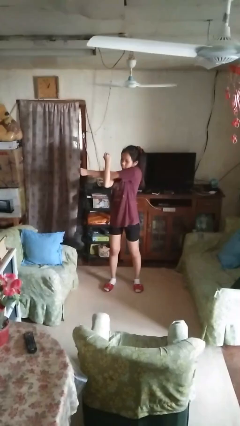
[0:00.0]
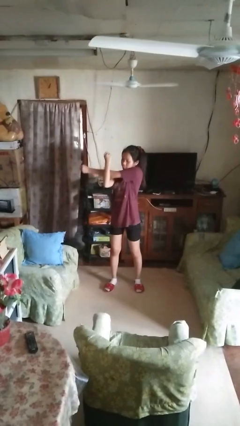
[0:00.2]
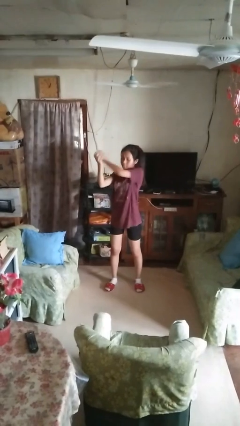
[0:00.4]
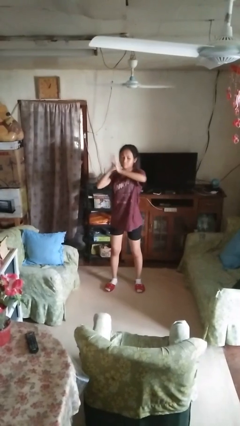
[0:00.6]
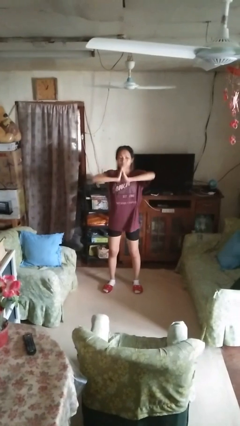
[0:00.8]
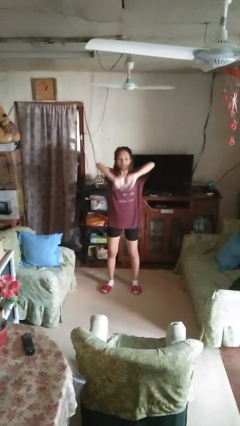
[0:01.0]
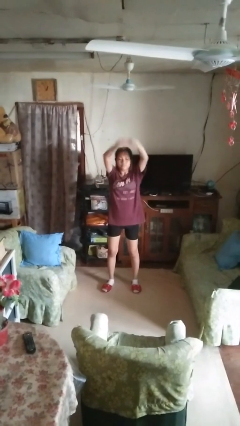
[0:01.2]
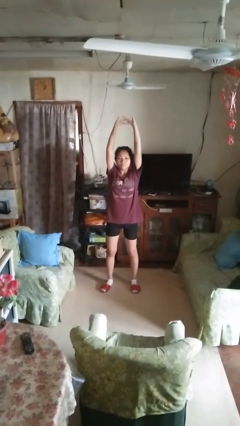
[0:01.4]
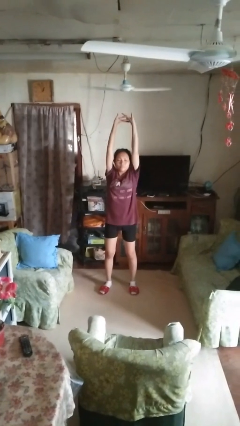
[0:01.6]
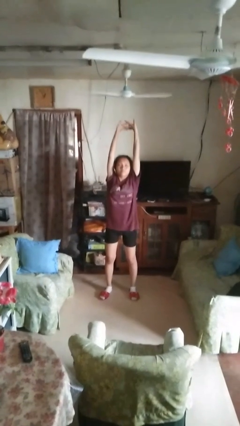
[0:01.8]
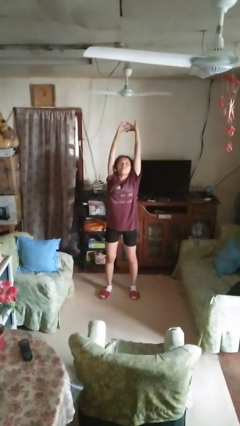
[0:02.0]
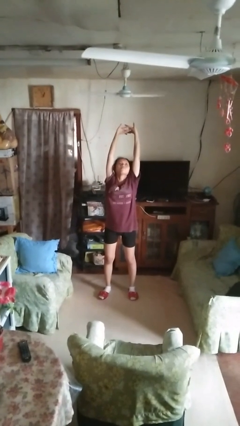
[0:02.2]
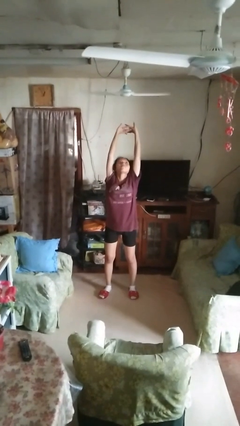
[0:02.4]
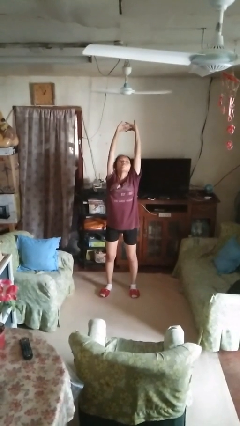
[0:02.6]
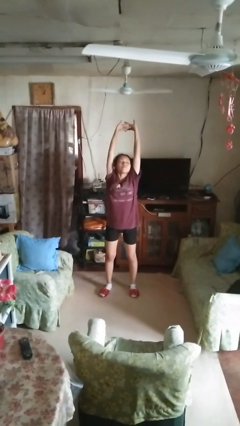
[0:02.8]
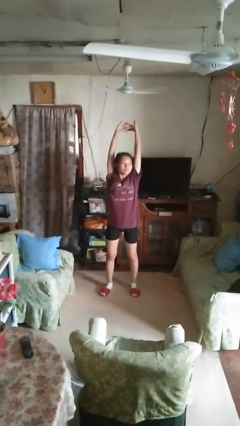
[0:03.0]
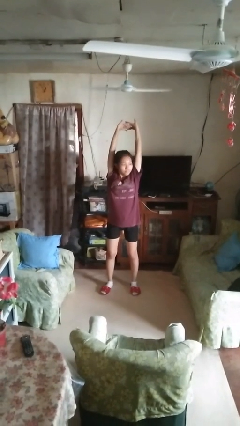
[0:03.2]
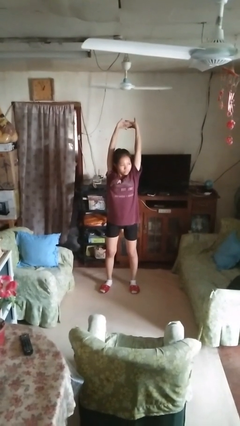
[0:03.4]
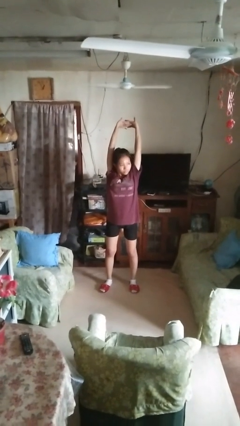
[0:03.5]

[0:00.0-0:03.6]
person stretches arms over head

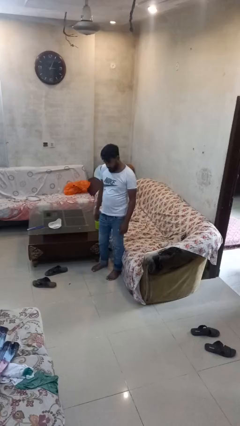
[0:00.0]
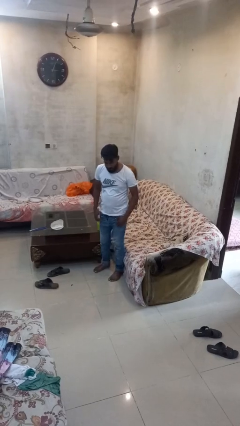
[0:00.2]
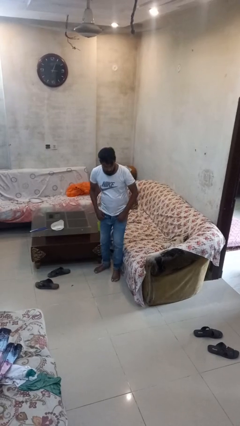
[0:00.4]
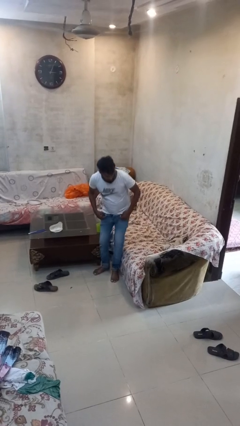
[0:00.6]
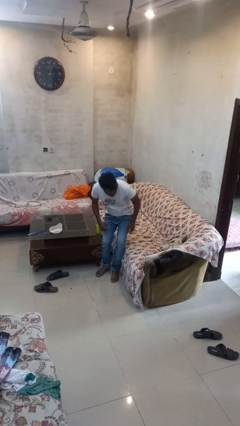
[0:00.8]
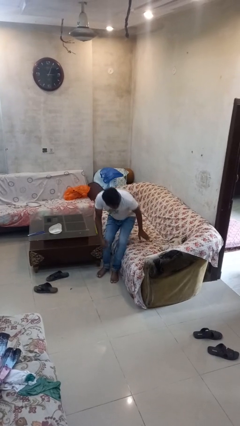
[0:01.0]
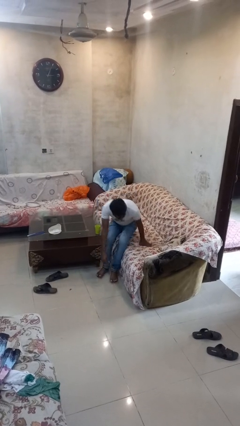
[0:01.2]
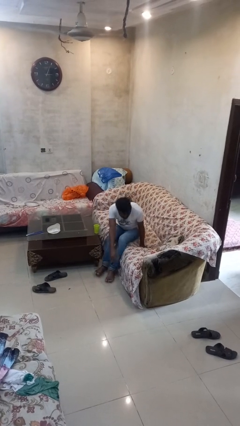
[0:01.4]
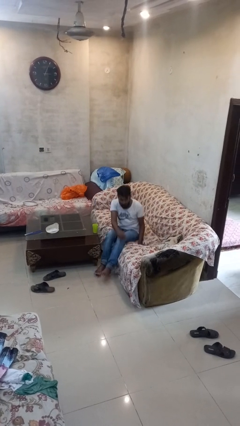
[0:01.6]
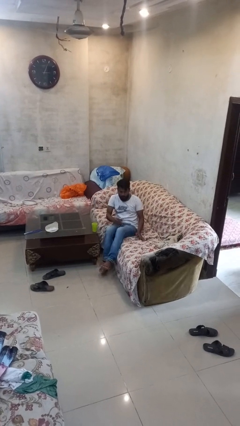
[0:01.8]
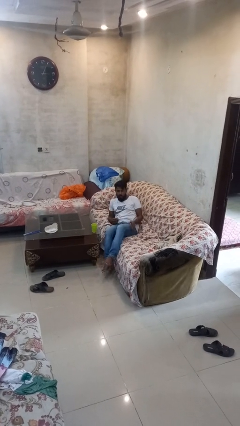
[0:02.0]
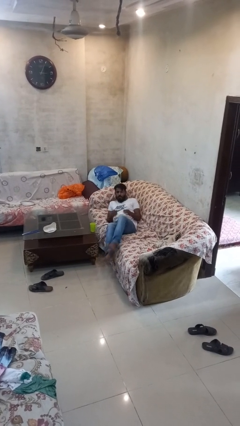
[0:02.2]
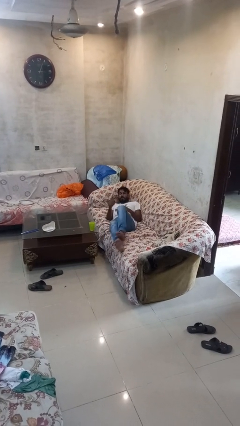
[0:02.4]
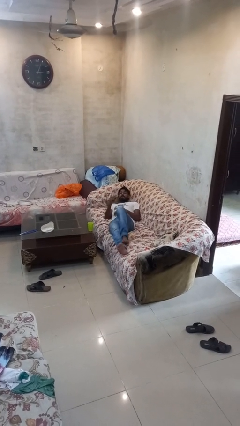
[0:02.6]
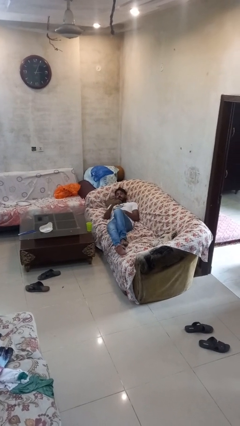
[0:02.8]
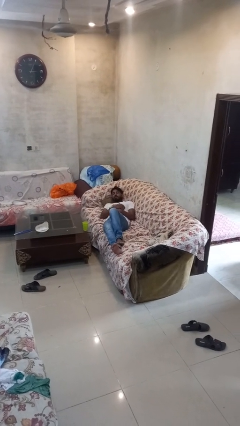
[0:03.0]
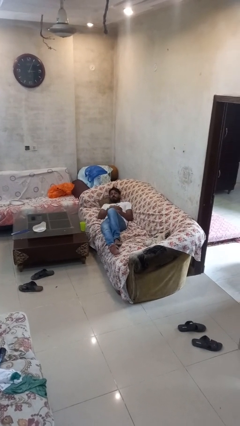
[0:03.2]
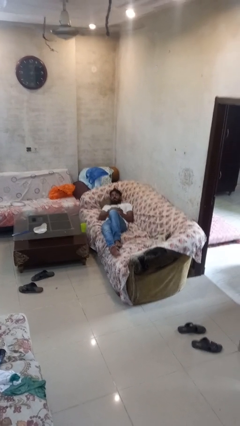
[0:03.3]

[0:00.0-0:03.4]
person lies down on couch

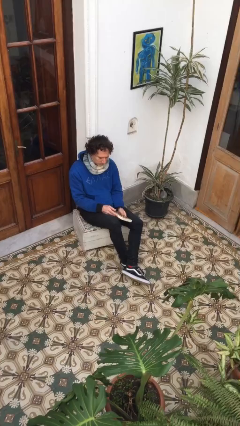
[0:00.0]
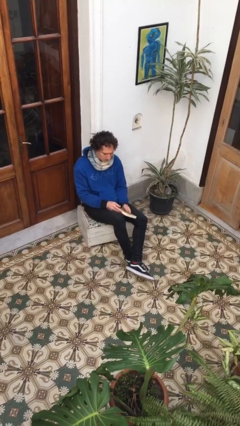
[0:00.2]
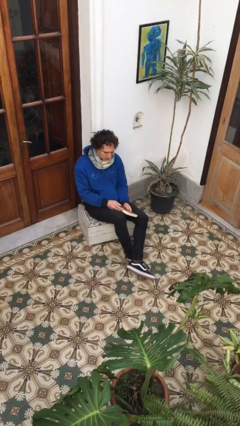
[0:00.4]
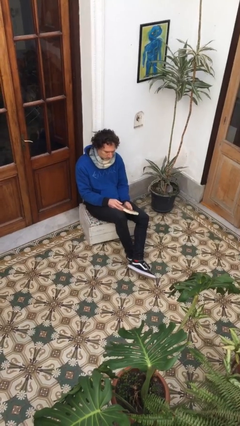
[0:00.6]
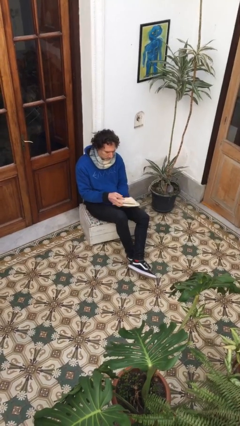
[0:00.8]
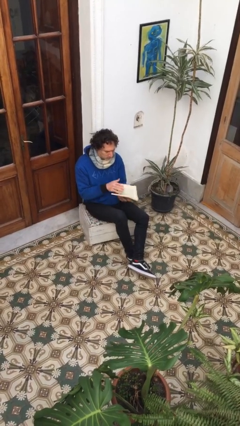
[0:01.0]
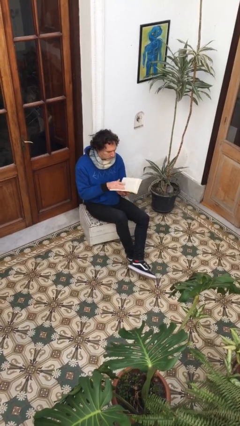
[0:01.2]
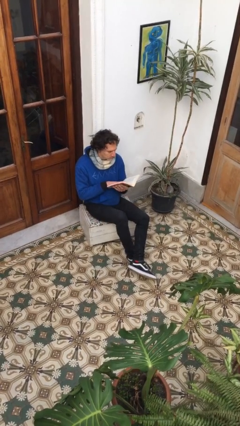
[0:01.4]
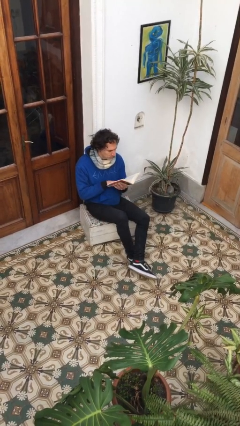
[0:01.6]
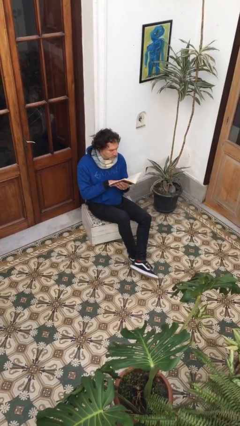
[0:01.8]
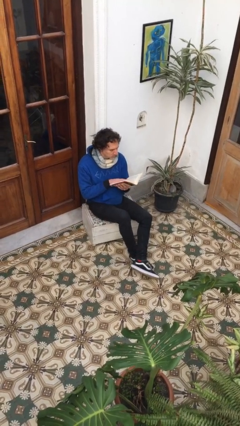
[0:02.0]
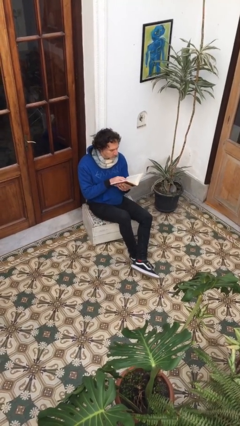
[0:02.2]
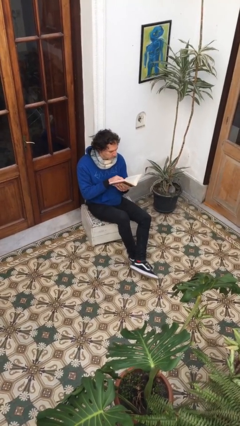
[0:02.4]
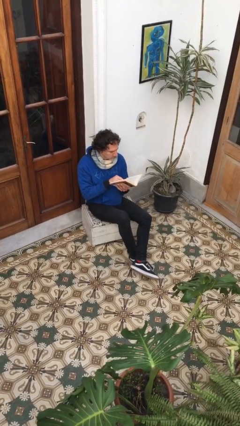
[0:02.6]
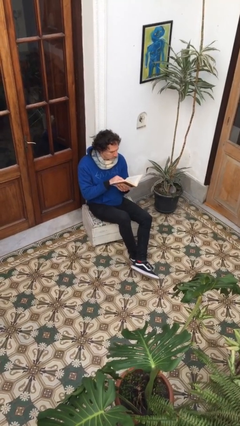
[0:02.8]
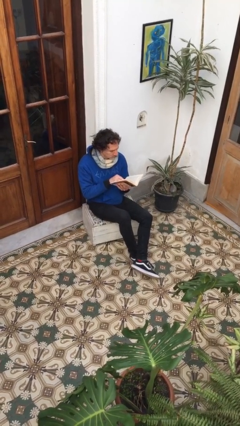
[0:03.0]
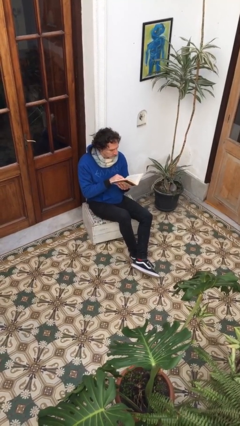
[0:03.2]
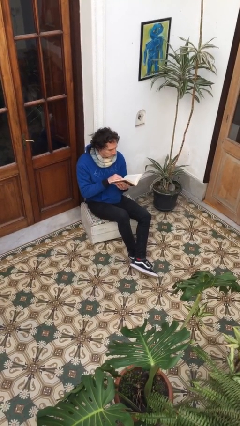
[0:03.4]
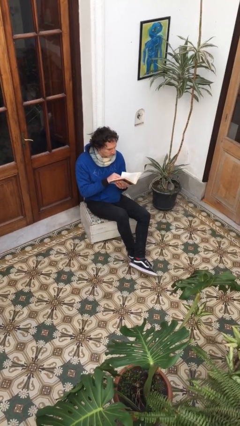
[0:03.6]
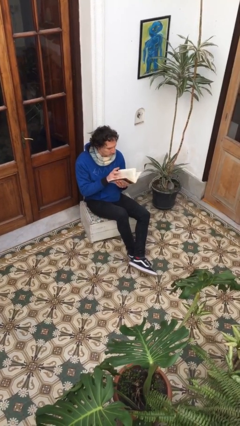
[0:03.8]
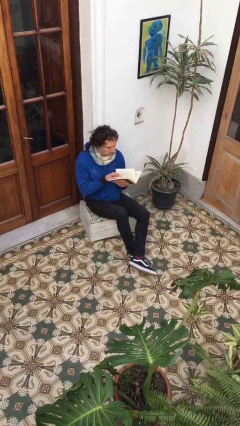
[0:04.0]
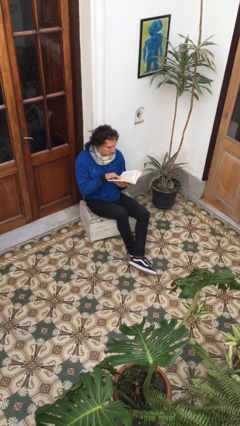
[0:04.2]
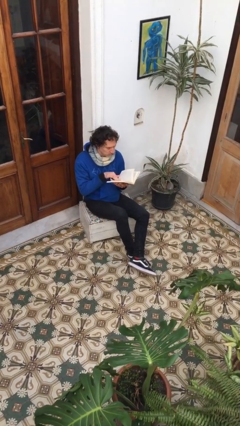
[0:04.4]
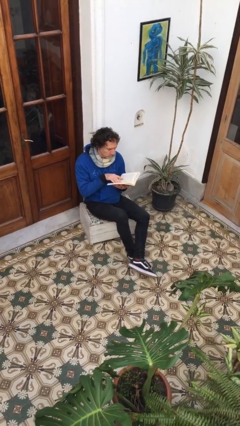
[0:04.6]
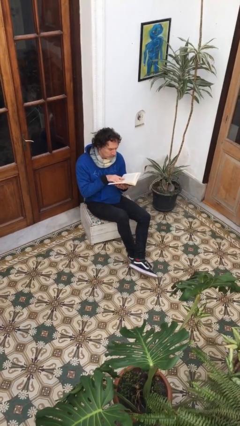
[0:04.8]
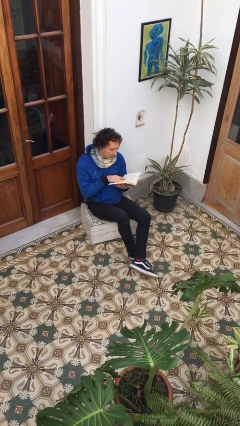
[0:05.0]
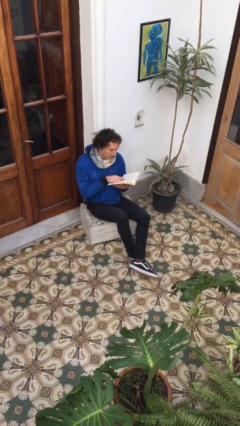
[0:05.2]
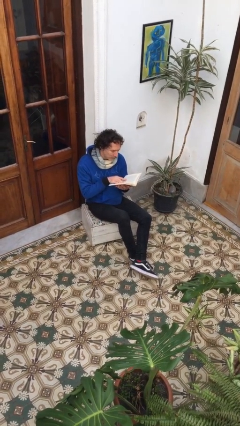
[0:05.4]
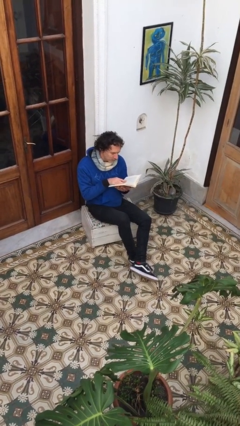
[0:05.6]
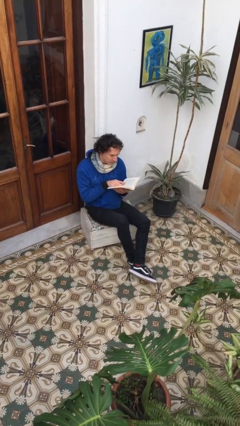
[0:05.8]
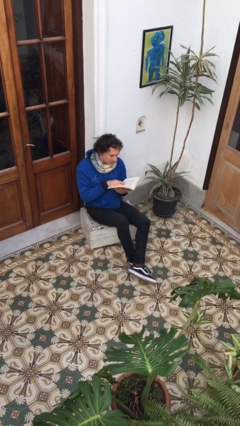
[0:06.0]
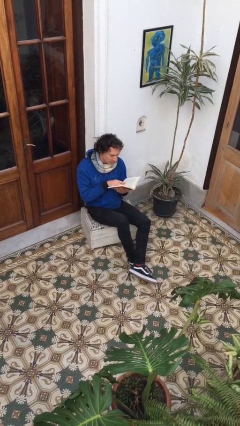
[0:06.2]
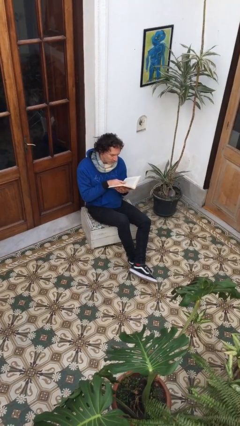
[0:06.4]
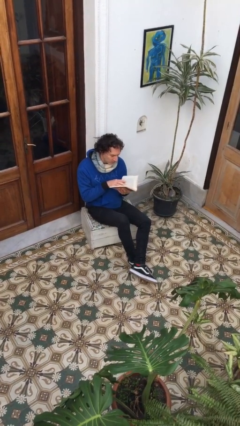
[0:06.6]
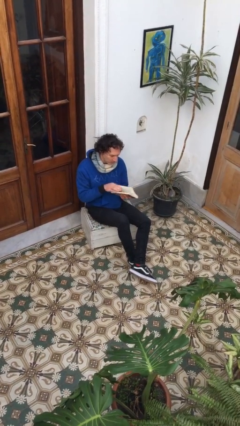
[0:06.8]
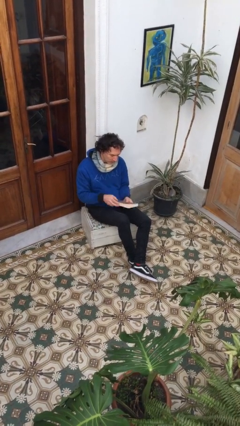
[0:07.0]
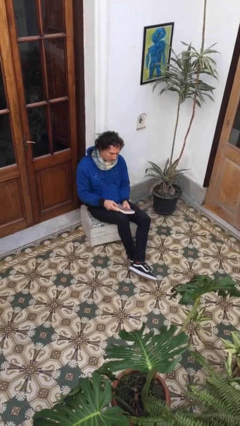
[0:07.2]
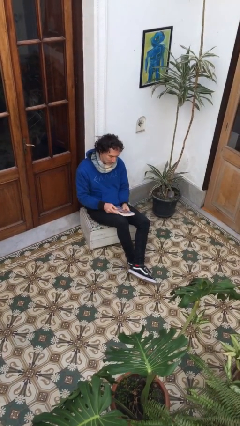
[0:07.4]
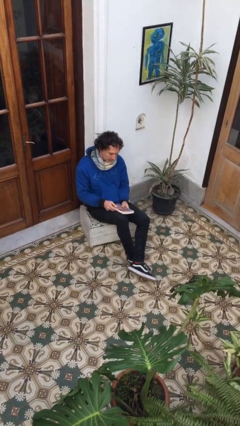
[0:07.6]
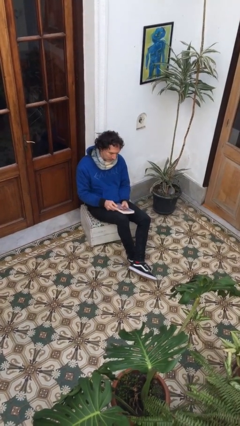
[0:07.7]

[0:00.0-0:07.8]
person reads book

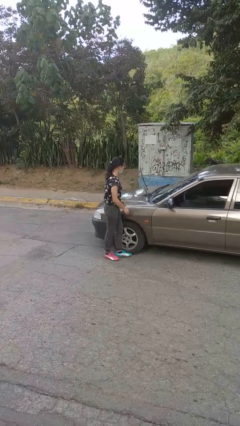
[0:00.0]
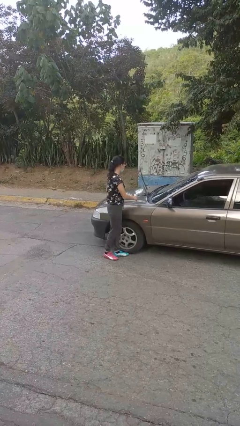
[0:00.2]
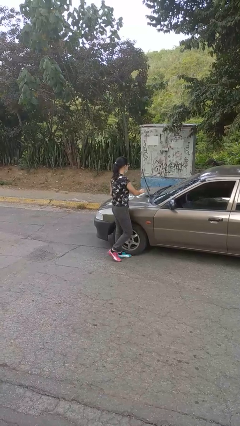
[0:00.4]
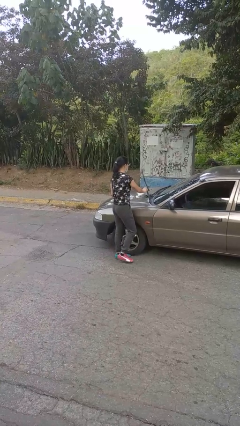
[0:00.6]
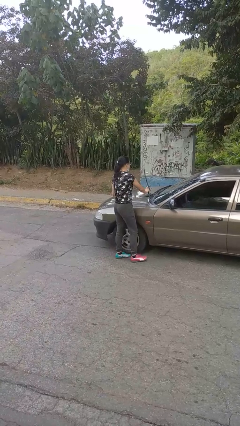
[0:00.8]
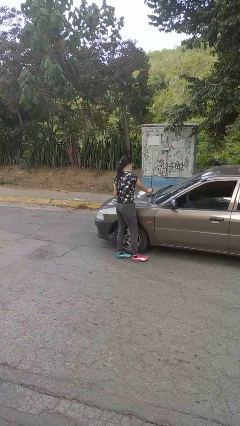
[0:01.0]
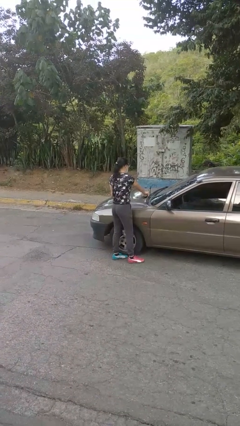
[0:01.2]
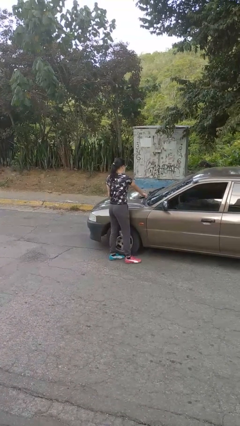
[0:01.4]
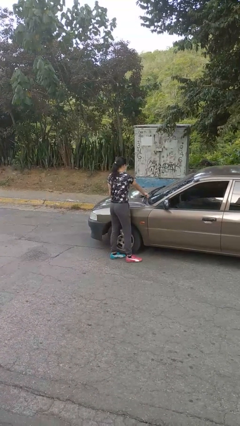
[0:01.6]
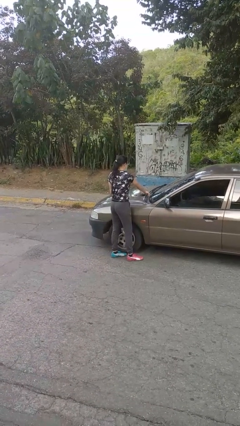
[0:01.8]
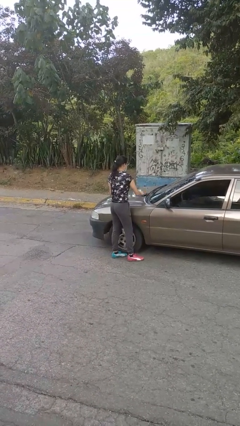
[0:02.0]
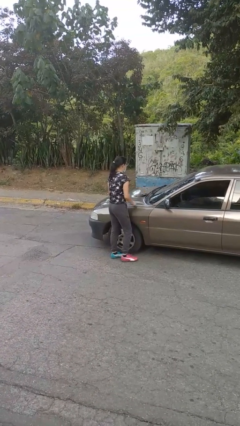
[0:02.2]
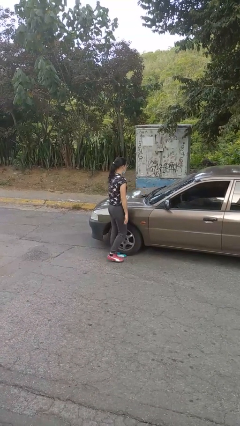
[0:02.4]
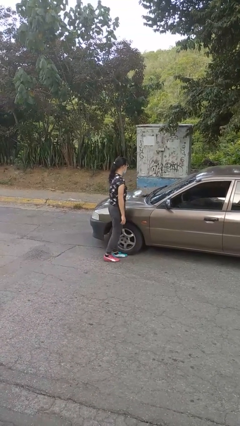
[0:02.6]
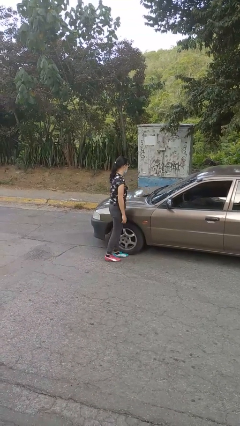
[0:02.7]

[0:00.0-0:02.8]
person flips down car wipers

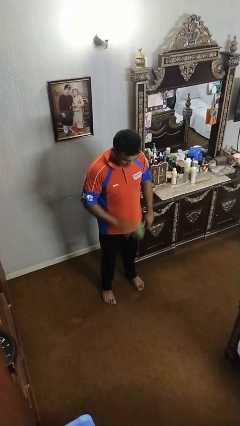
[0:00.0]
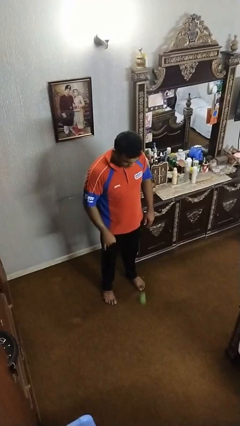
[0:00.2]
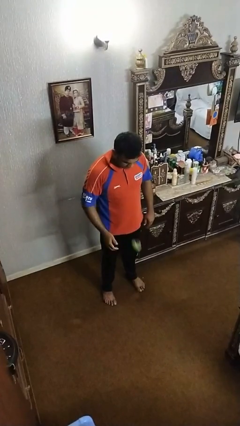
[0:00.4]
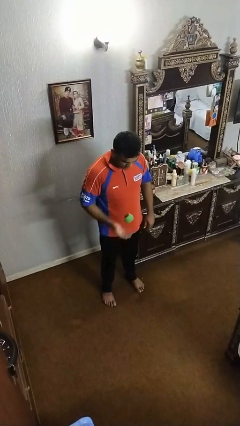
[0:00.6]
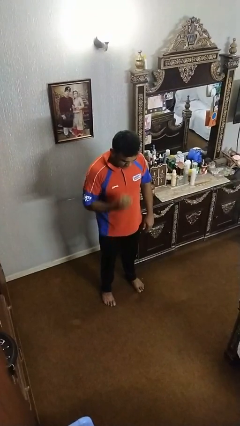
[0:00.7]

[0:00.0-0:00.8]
person bounces ball on floor
